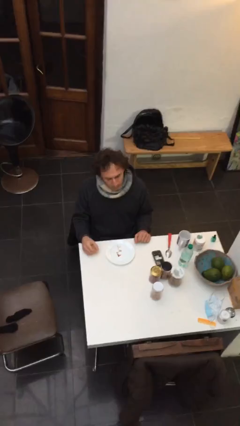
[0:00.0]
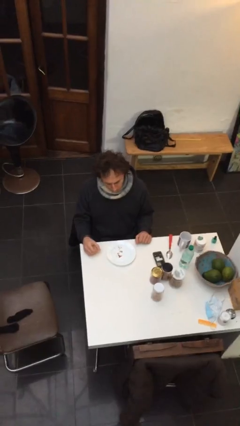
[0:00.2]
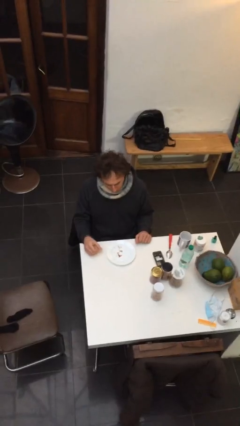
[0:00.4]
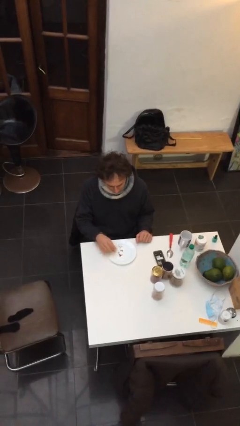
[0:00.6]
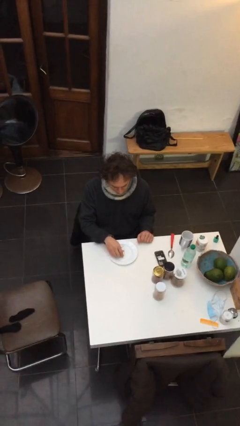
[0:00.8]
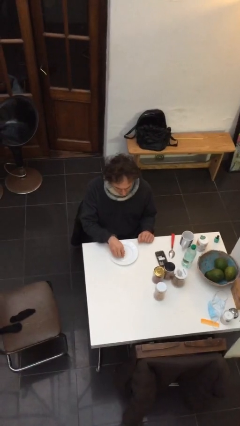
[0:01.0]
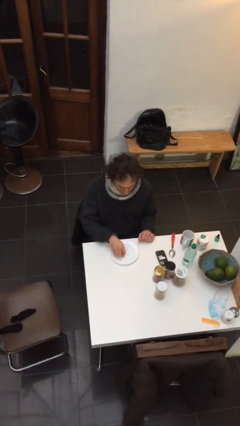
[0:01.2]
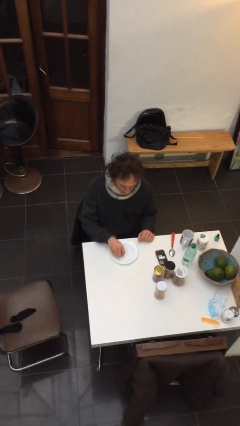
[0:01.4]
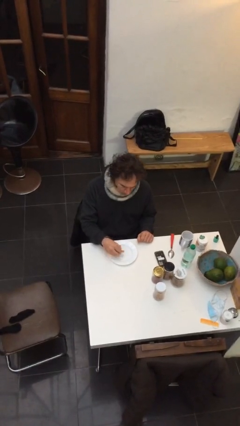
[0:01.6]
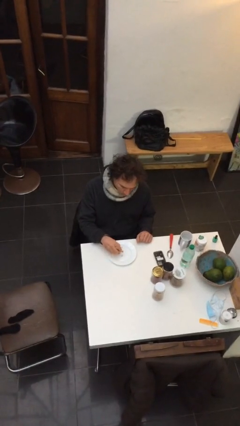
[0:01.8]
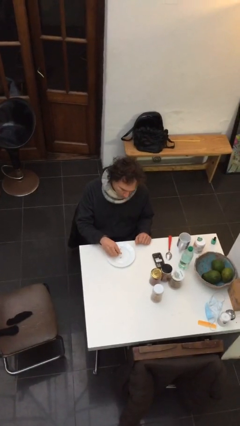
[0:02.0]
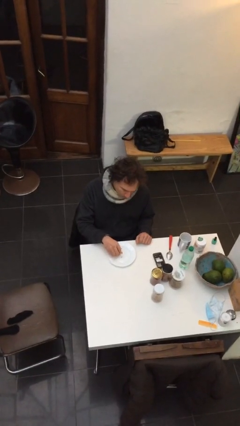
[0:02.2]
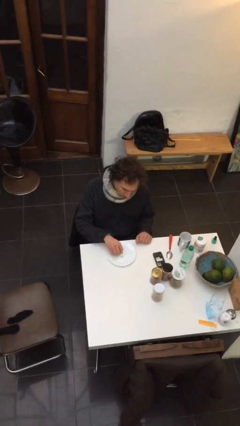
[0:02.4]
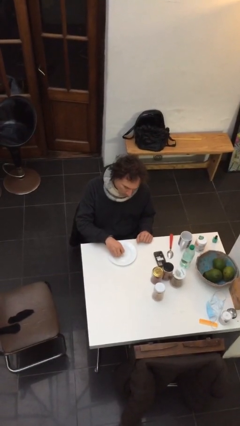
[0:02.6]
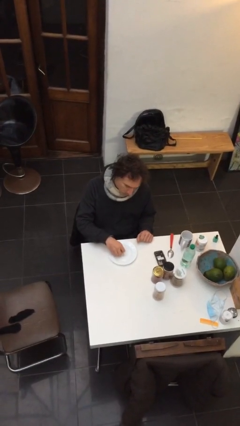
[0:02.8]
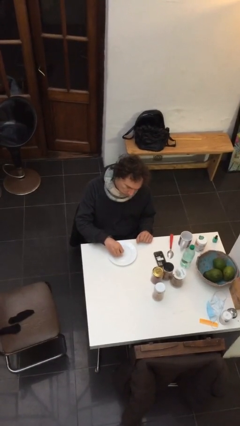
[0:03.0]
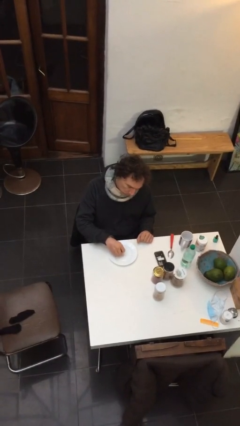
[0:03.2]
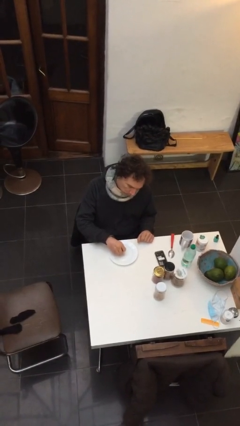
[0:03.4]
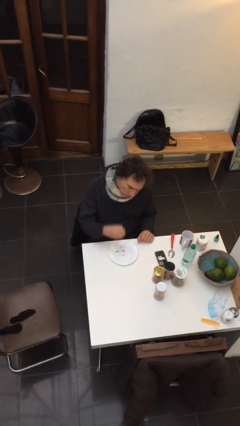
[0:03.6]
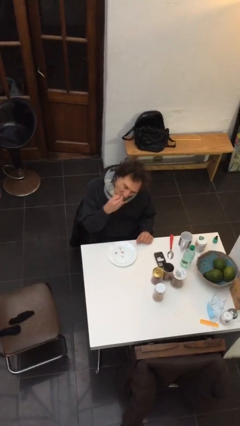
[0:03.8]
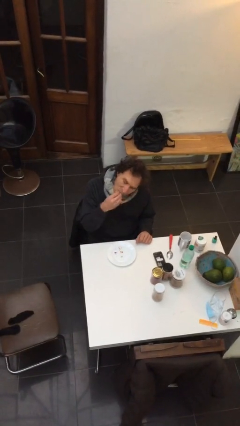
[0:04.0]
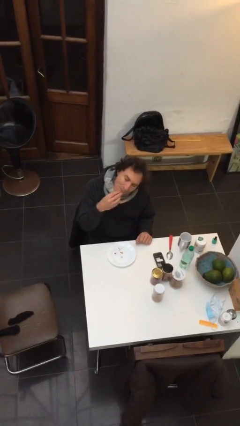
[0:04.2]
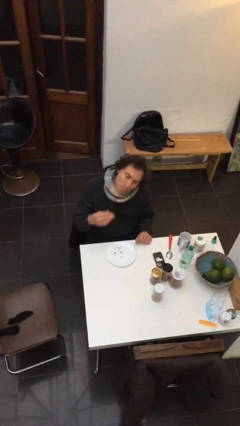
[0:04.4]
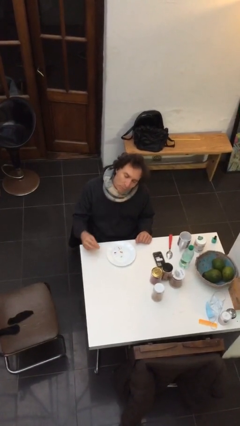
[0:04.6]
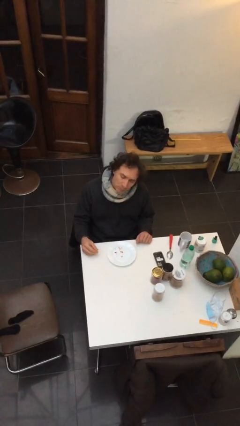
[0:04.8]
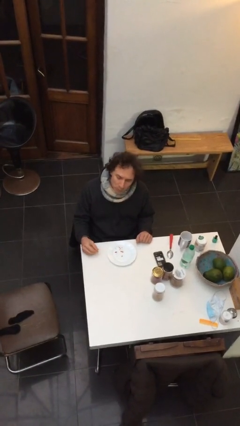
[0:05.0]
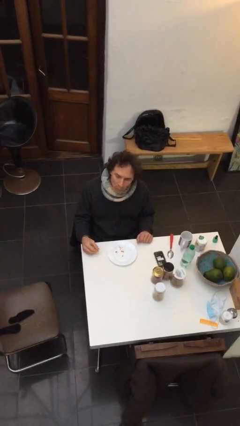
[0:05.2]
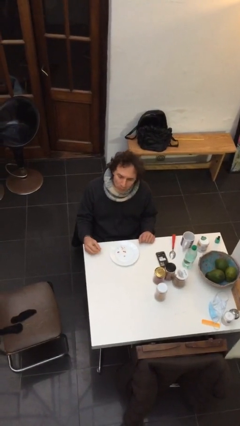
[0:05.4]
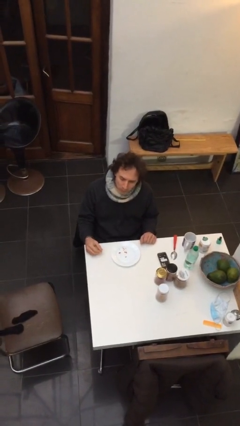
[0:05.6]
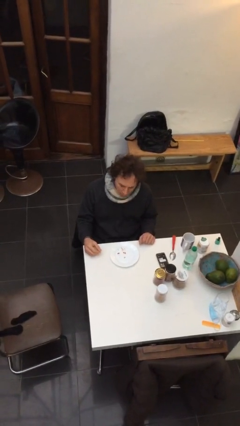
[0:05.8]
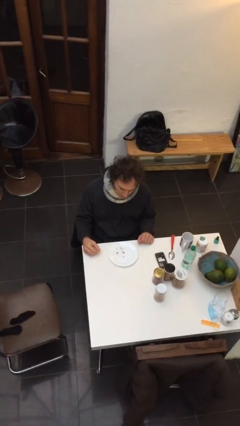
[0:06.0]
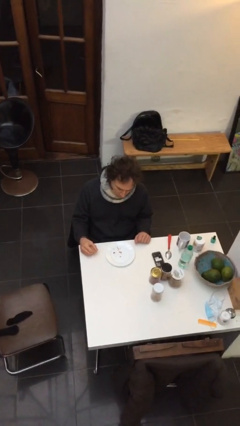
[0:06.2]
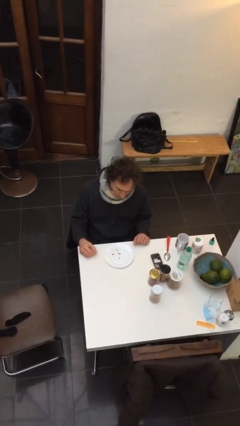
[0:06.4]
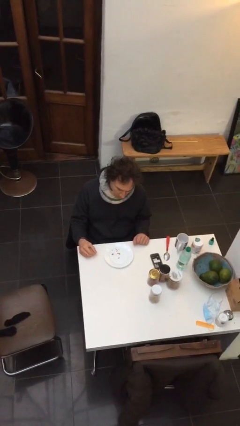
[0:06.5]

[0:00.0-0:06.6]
person eats with hands

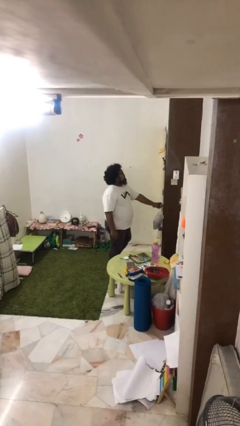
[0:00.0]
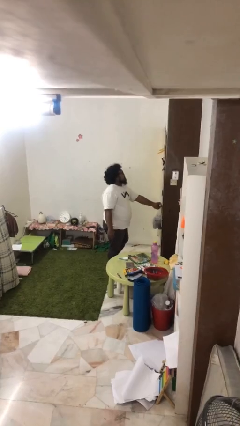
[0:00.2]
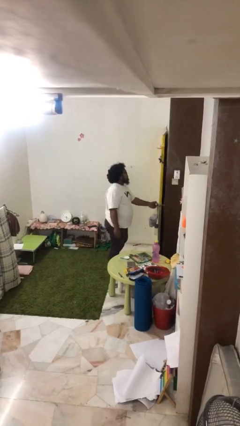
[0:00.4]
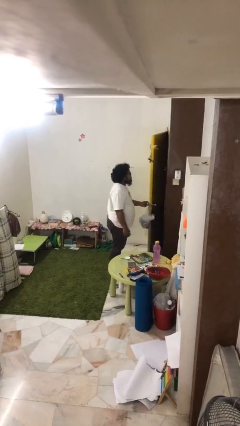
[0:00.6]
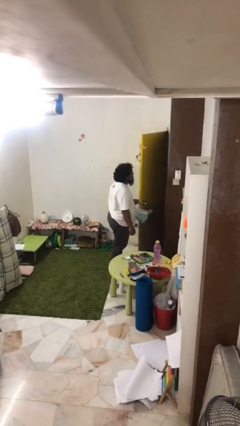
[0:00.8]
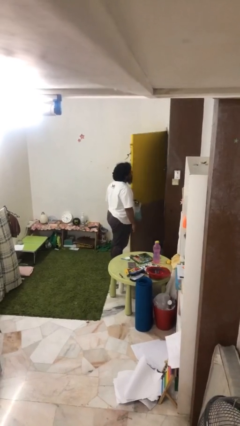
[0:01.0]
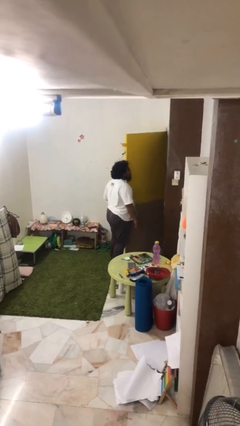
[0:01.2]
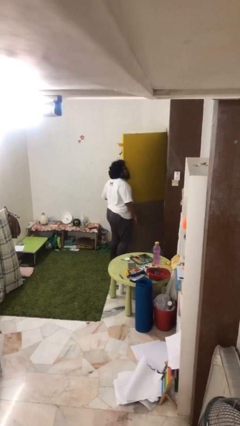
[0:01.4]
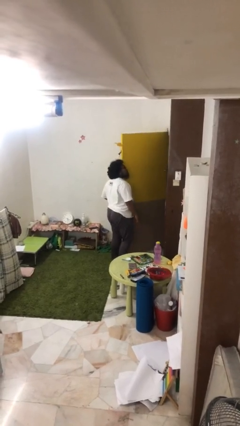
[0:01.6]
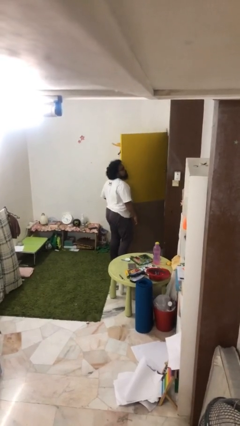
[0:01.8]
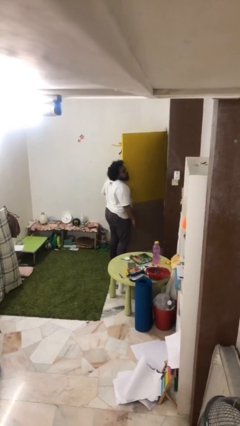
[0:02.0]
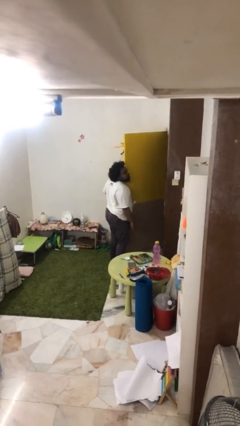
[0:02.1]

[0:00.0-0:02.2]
person opens facility door

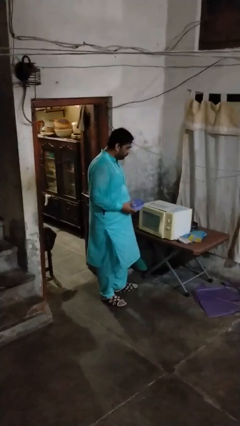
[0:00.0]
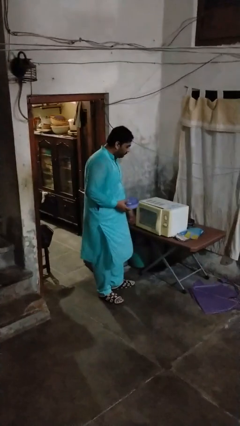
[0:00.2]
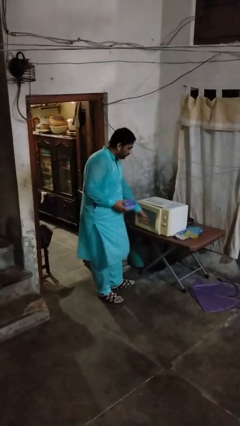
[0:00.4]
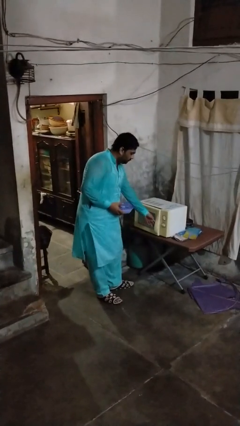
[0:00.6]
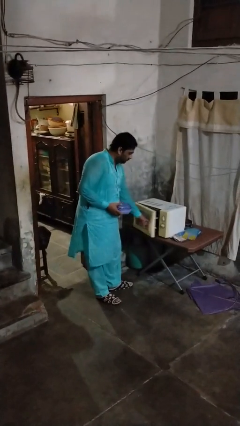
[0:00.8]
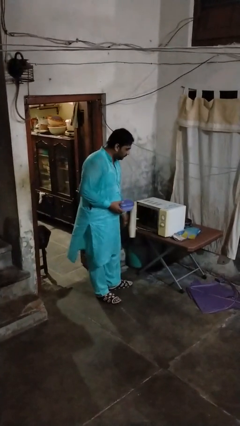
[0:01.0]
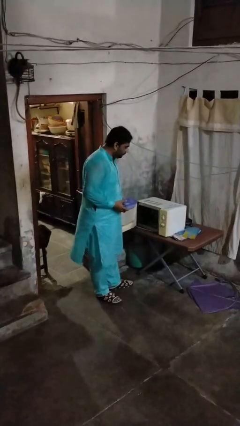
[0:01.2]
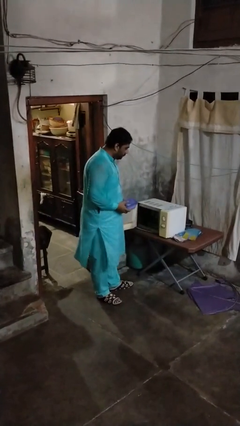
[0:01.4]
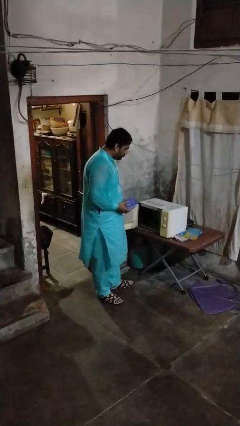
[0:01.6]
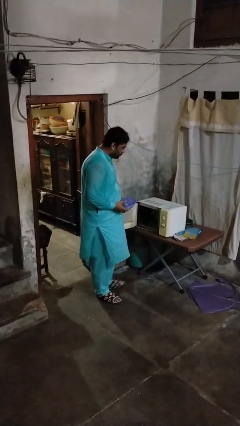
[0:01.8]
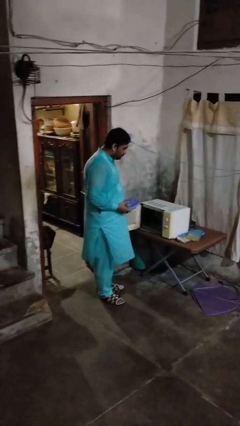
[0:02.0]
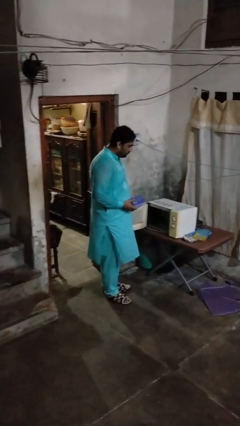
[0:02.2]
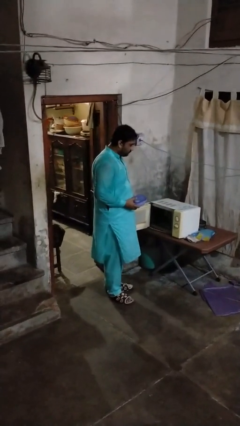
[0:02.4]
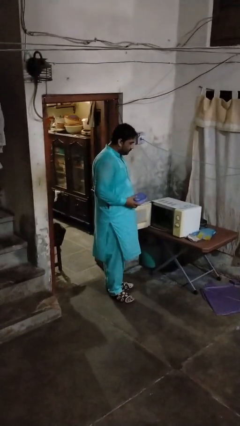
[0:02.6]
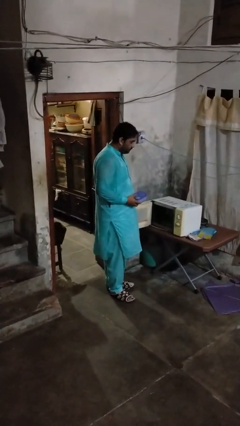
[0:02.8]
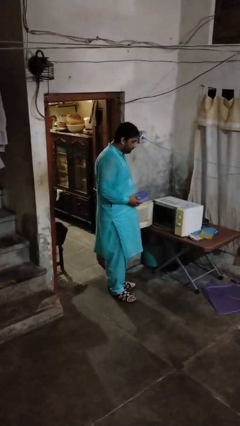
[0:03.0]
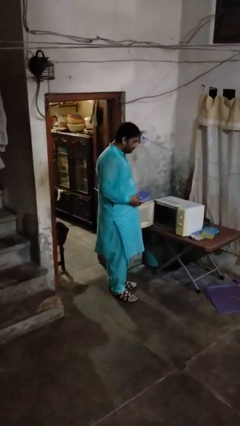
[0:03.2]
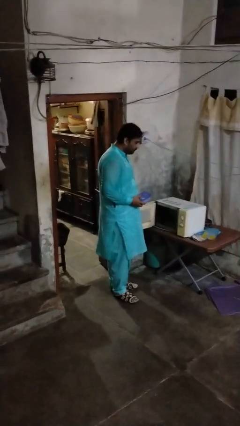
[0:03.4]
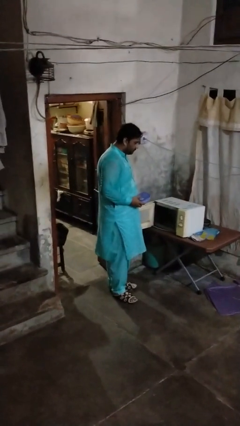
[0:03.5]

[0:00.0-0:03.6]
person opens microwave

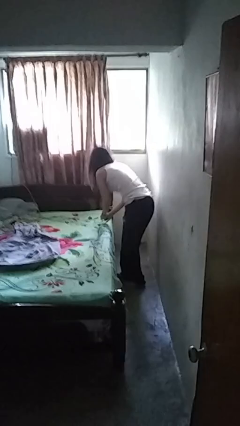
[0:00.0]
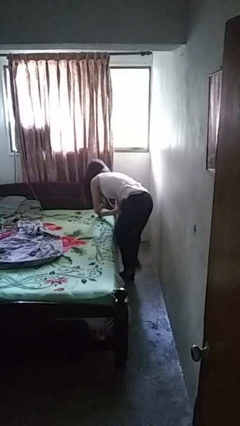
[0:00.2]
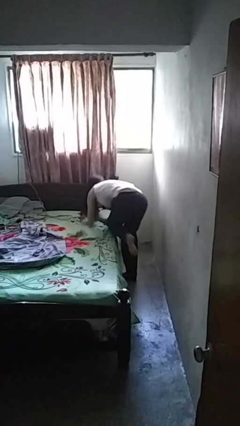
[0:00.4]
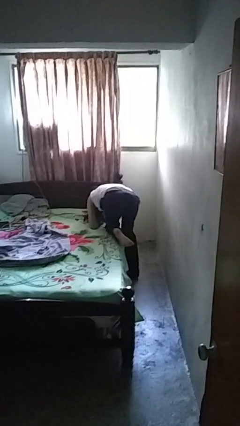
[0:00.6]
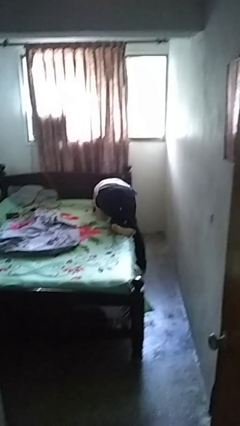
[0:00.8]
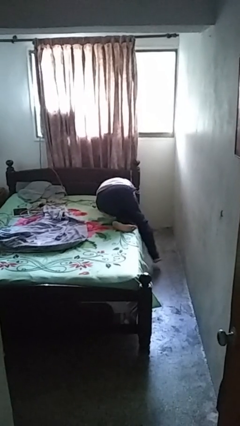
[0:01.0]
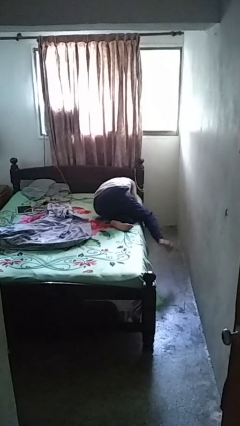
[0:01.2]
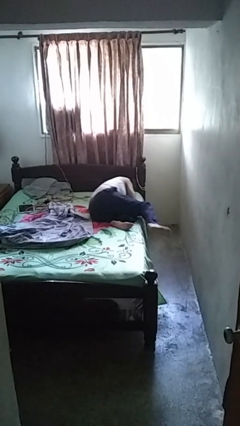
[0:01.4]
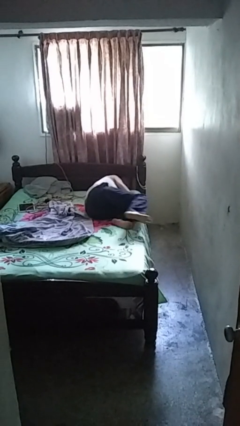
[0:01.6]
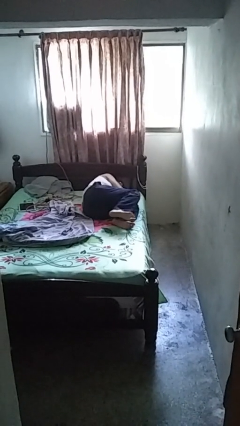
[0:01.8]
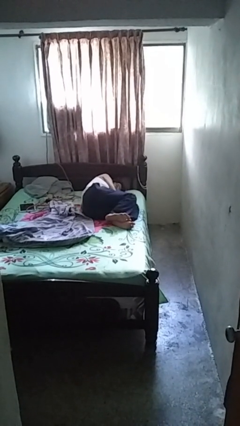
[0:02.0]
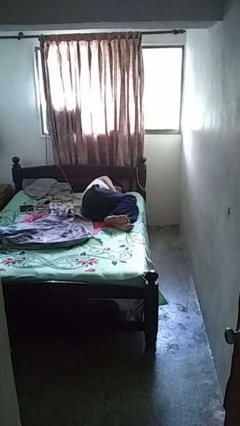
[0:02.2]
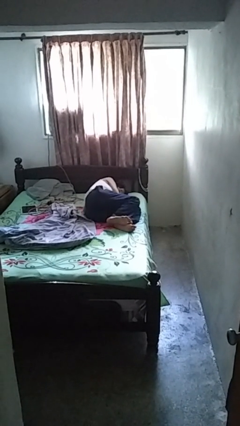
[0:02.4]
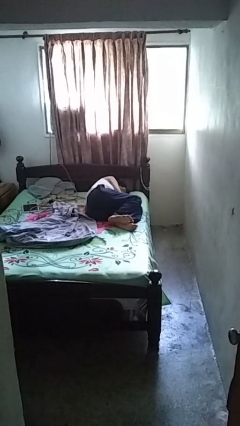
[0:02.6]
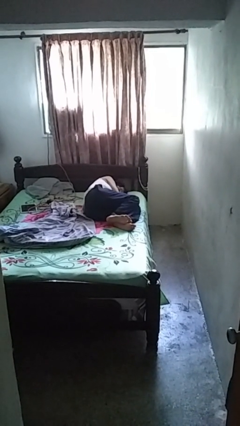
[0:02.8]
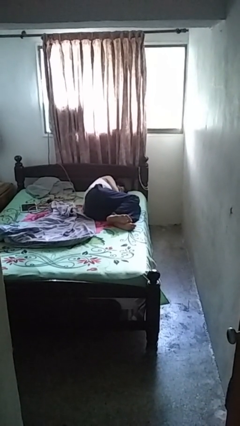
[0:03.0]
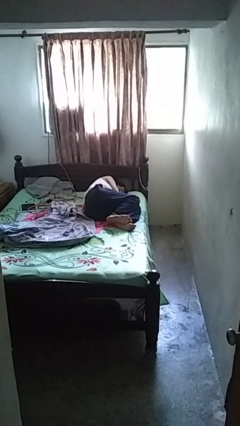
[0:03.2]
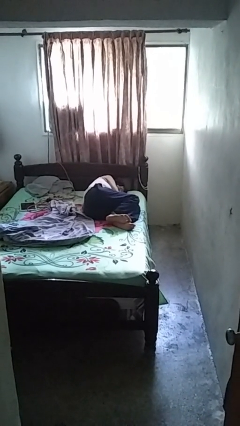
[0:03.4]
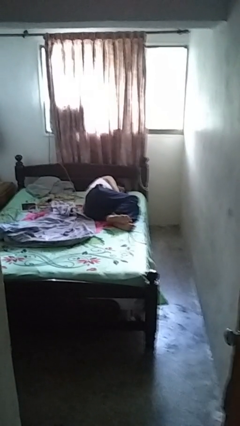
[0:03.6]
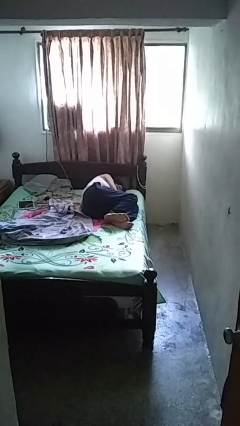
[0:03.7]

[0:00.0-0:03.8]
person lies down on bed

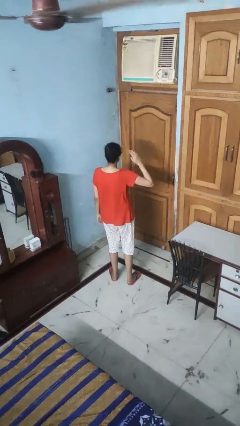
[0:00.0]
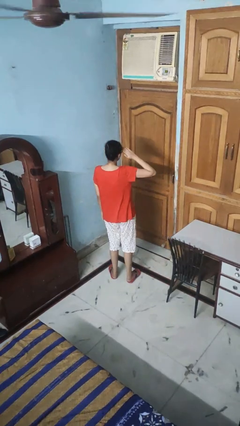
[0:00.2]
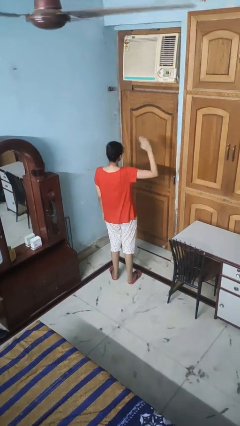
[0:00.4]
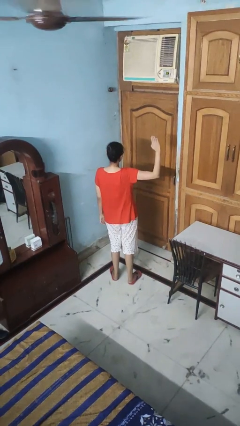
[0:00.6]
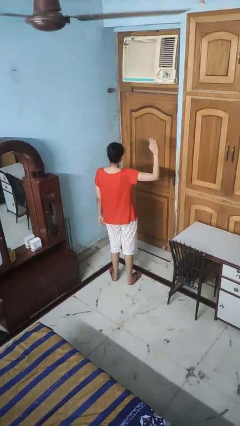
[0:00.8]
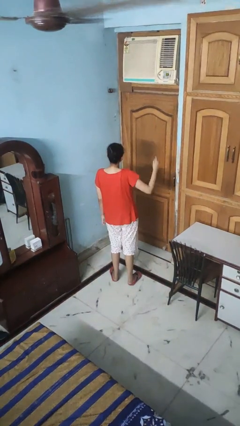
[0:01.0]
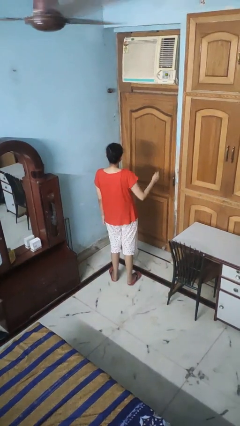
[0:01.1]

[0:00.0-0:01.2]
person salutes

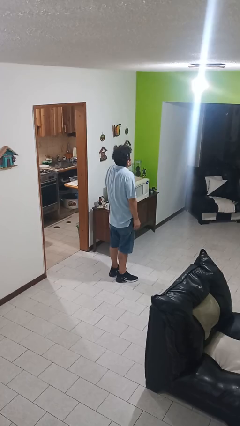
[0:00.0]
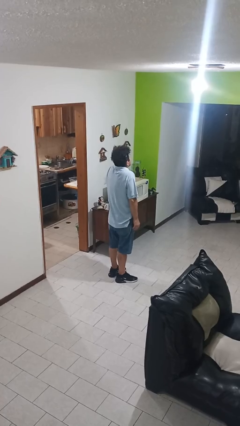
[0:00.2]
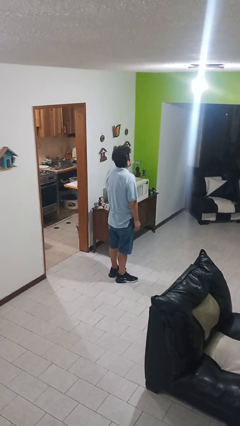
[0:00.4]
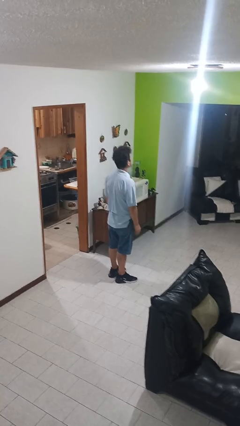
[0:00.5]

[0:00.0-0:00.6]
person shrugs
